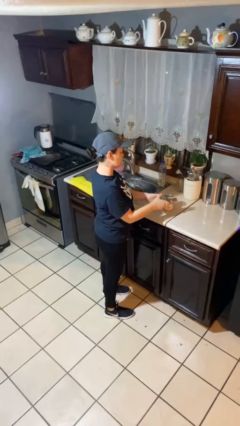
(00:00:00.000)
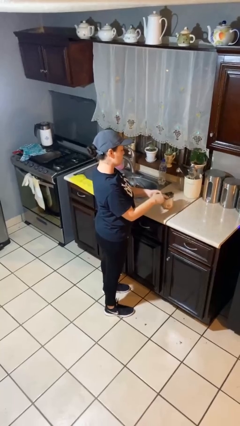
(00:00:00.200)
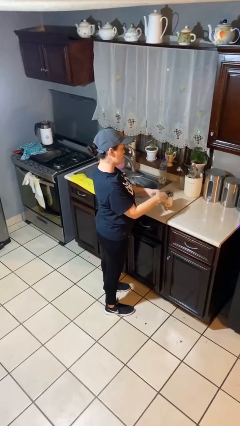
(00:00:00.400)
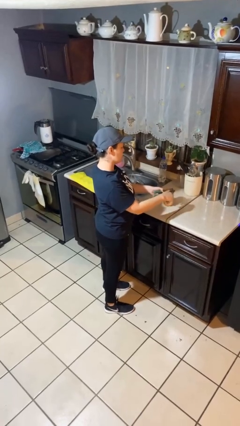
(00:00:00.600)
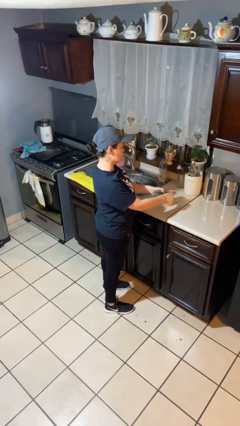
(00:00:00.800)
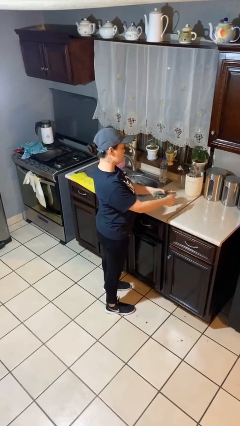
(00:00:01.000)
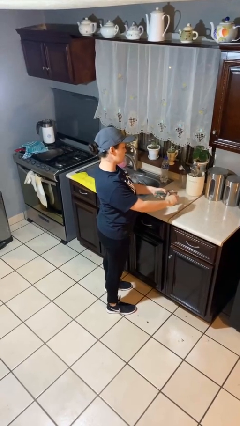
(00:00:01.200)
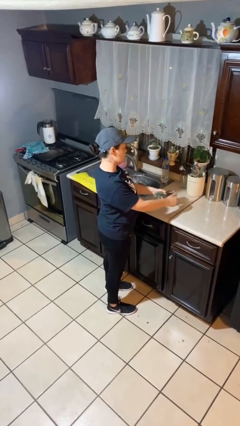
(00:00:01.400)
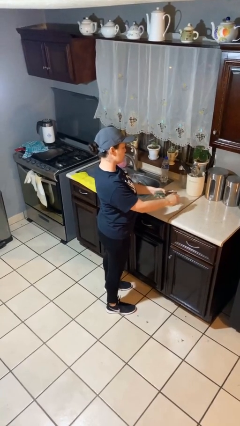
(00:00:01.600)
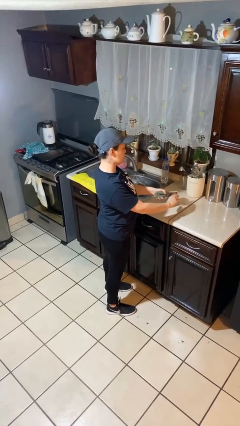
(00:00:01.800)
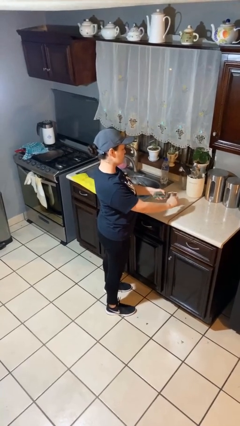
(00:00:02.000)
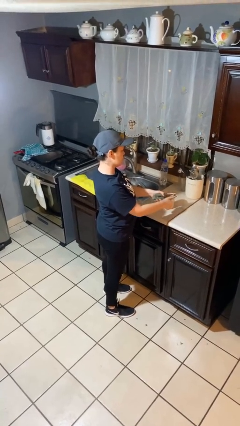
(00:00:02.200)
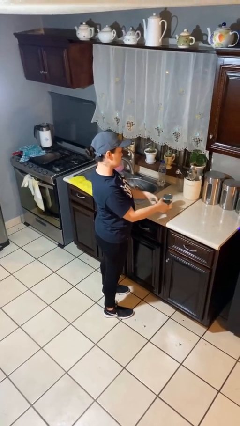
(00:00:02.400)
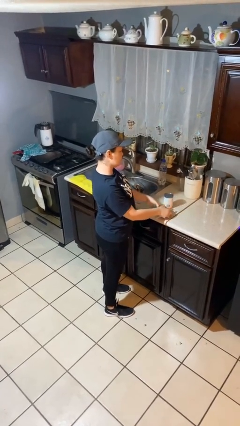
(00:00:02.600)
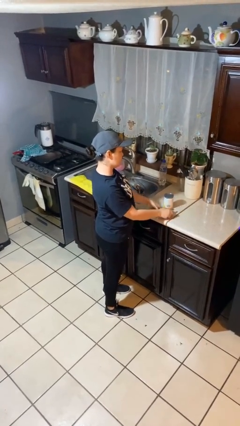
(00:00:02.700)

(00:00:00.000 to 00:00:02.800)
person opens can with can opener

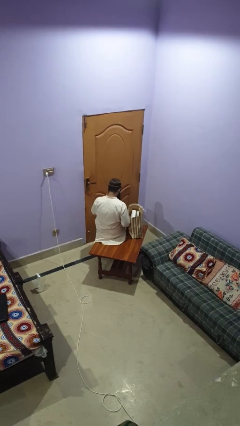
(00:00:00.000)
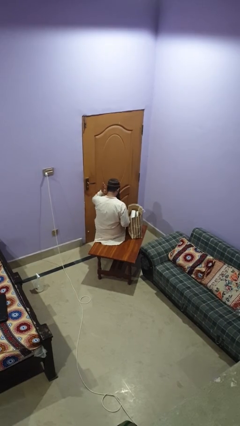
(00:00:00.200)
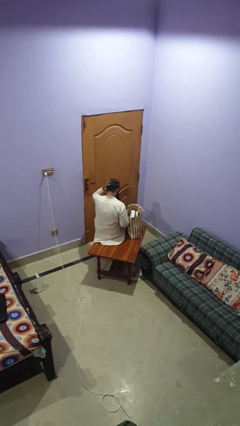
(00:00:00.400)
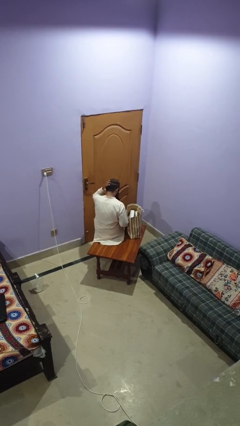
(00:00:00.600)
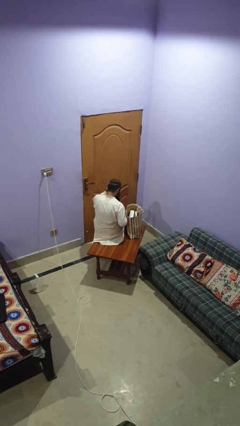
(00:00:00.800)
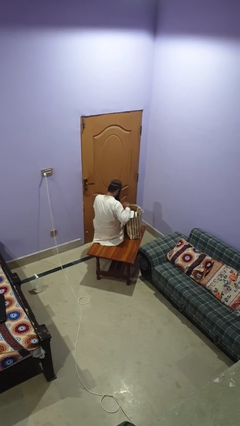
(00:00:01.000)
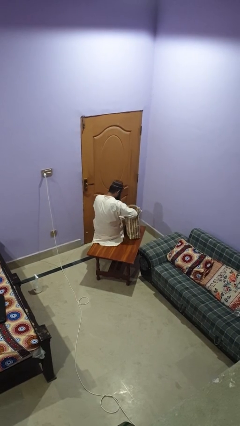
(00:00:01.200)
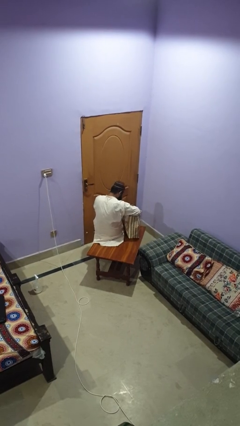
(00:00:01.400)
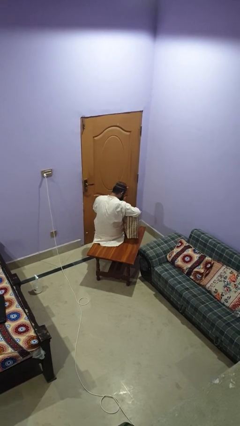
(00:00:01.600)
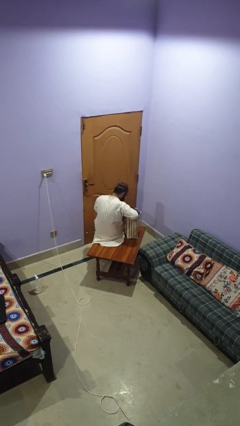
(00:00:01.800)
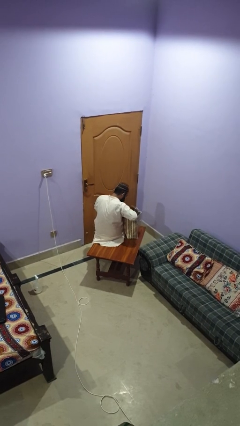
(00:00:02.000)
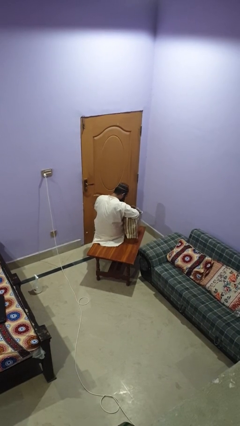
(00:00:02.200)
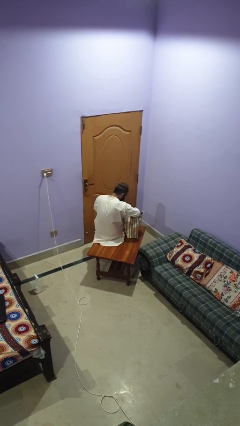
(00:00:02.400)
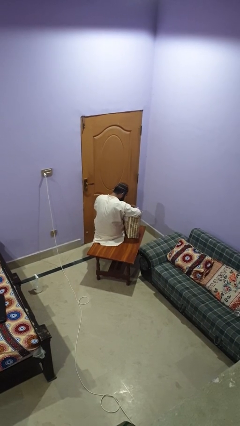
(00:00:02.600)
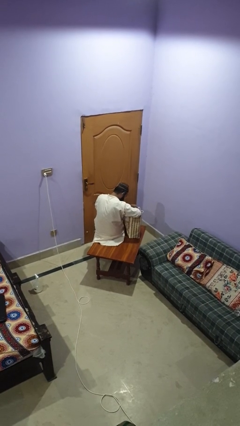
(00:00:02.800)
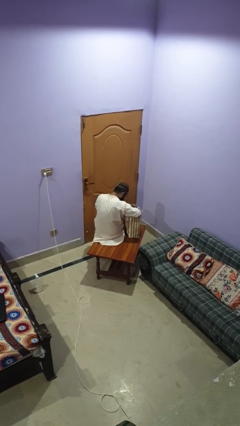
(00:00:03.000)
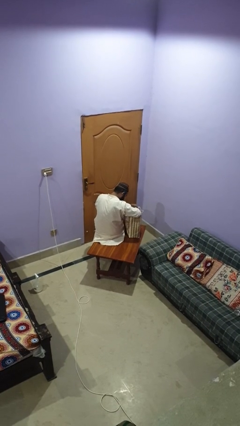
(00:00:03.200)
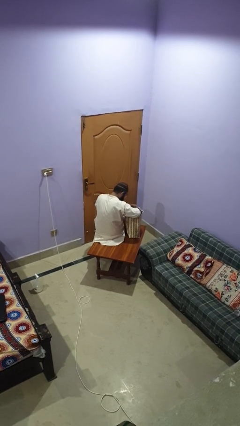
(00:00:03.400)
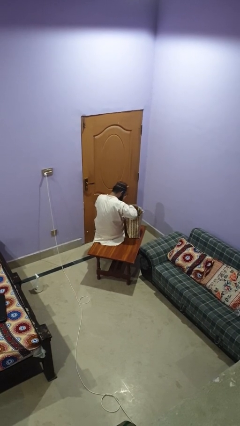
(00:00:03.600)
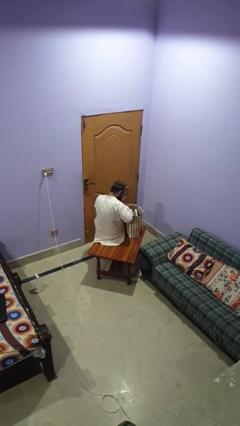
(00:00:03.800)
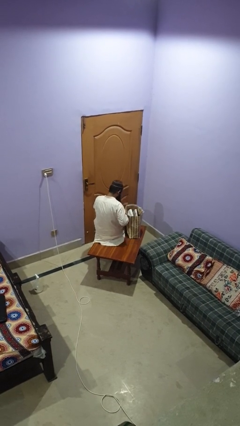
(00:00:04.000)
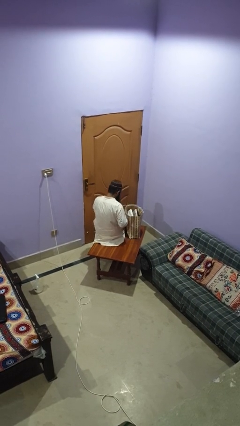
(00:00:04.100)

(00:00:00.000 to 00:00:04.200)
person searches in bag

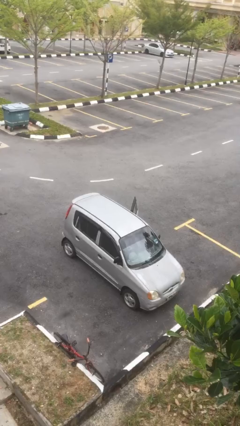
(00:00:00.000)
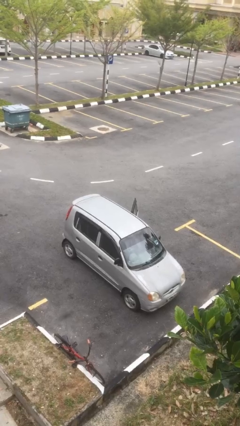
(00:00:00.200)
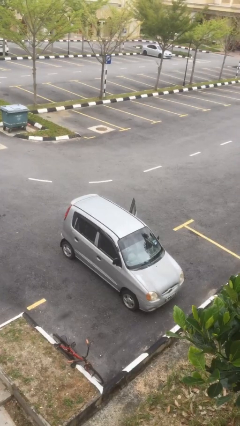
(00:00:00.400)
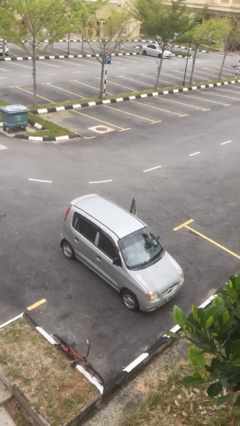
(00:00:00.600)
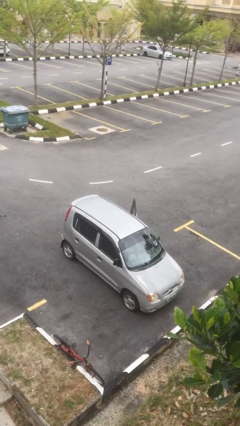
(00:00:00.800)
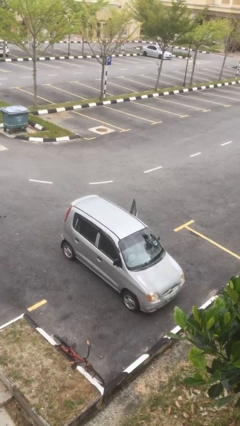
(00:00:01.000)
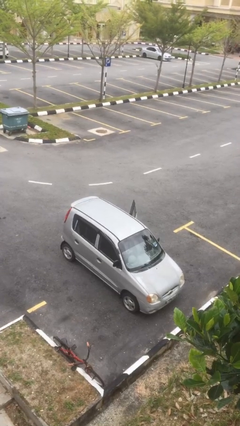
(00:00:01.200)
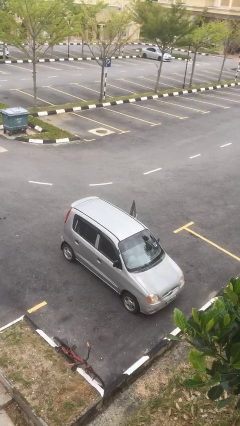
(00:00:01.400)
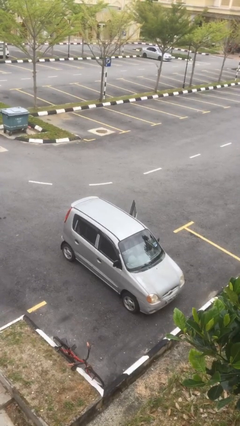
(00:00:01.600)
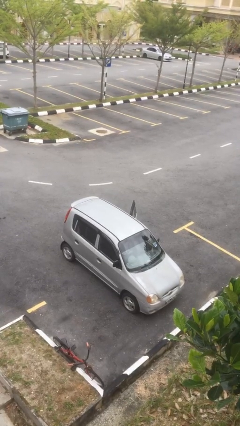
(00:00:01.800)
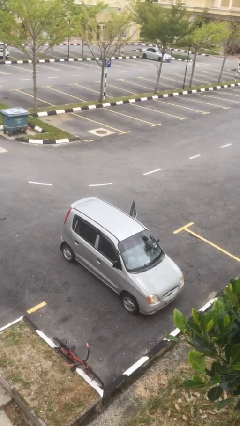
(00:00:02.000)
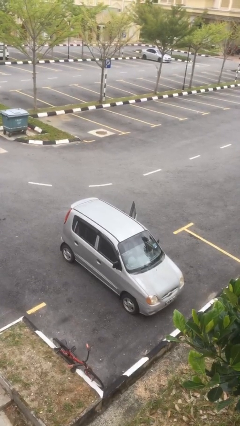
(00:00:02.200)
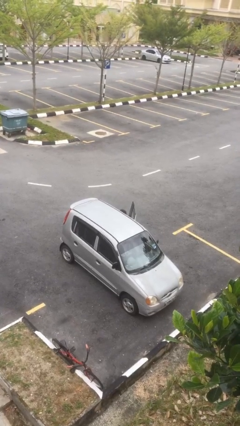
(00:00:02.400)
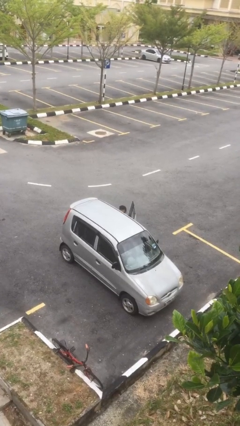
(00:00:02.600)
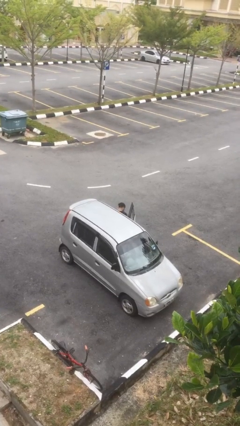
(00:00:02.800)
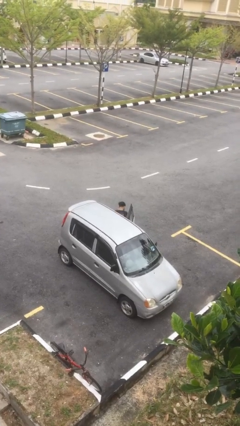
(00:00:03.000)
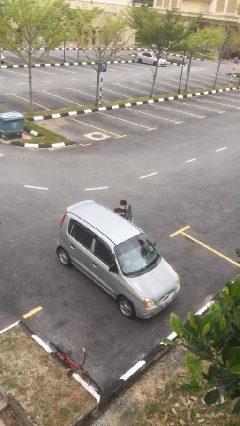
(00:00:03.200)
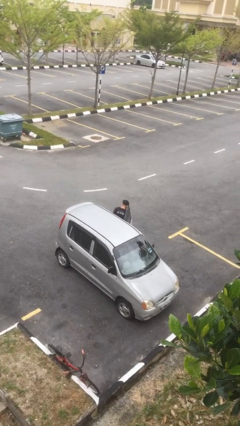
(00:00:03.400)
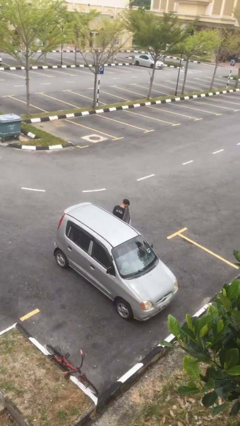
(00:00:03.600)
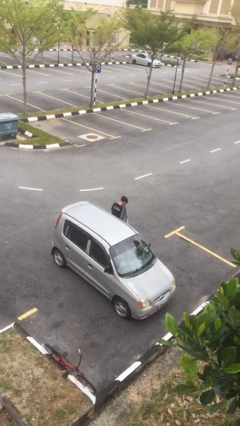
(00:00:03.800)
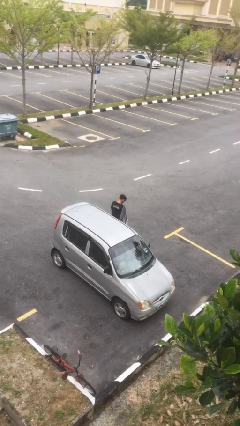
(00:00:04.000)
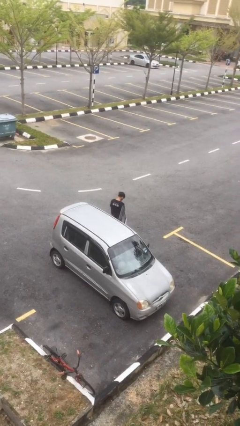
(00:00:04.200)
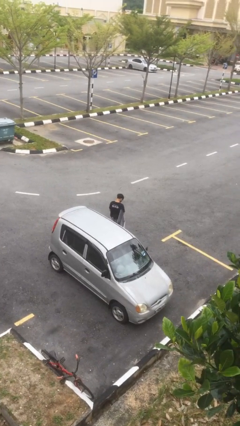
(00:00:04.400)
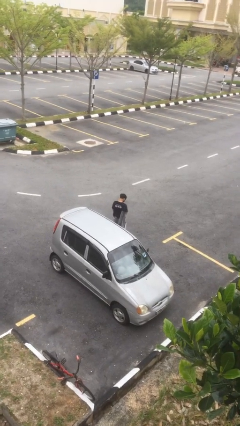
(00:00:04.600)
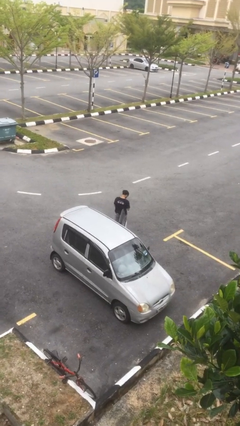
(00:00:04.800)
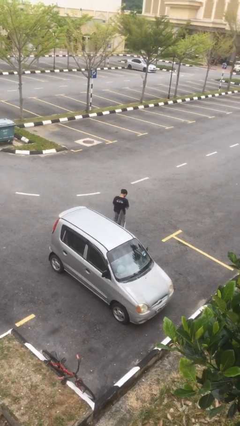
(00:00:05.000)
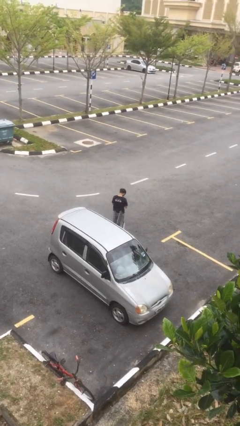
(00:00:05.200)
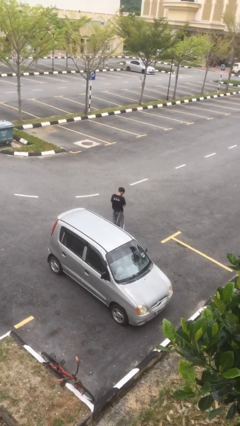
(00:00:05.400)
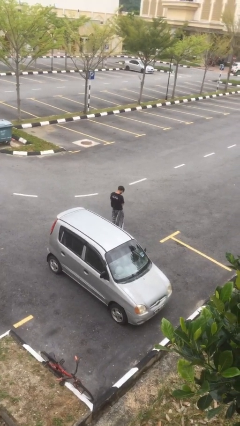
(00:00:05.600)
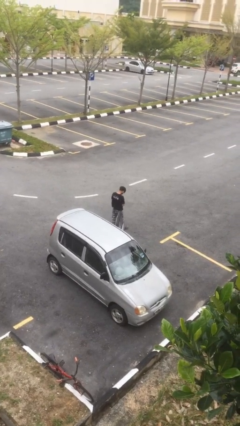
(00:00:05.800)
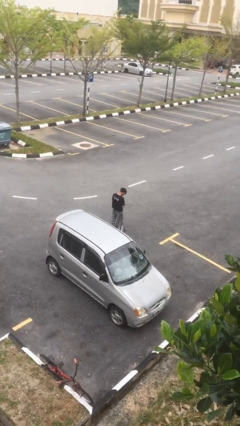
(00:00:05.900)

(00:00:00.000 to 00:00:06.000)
person exits car

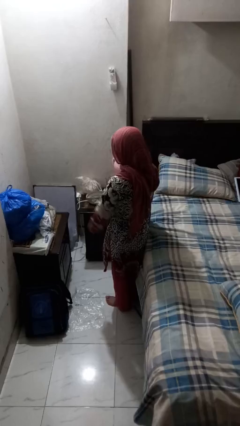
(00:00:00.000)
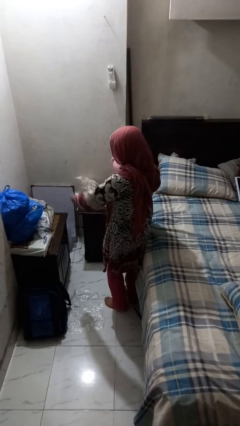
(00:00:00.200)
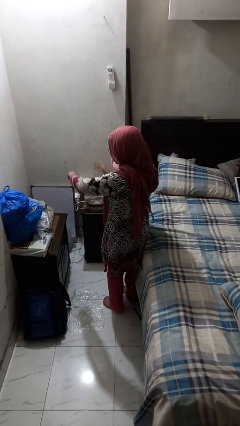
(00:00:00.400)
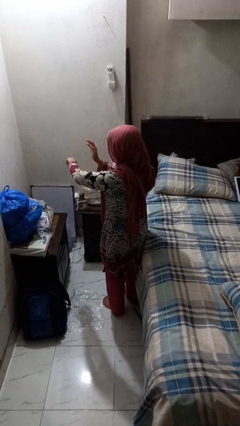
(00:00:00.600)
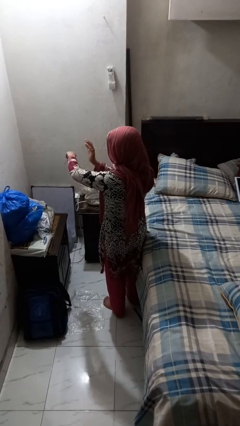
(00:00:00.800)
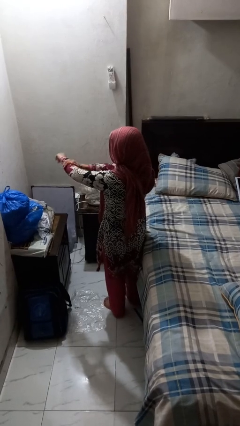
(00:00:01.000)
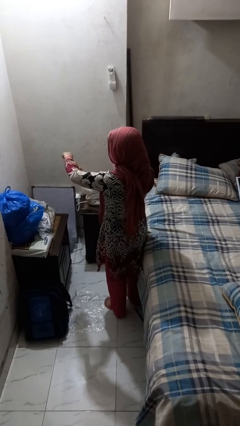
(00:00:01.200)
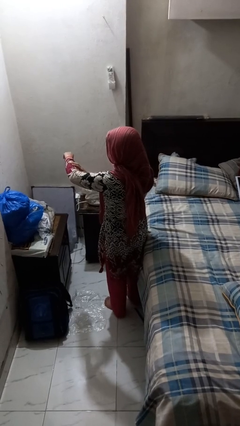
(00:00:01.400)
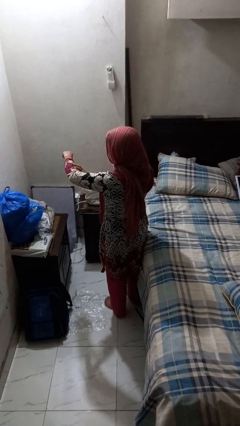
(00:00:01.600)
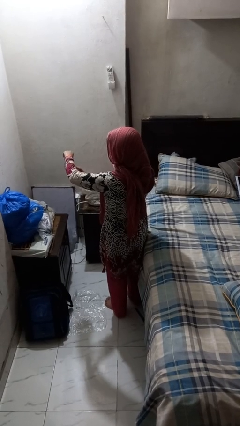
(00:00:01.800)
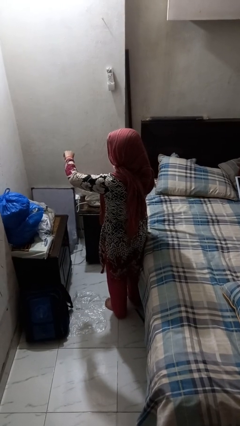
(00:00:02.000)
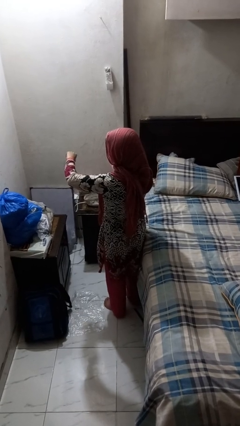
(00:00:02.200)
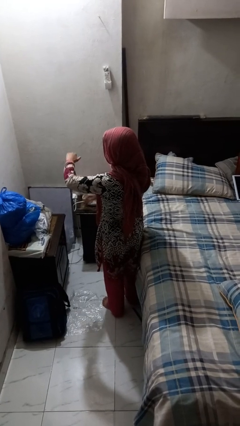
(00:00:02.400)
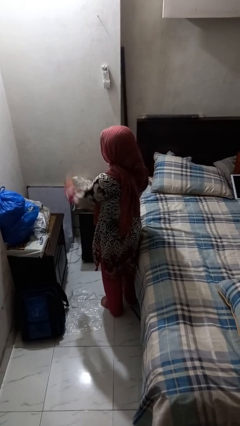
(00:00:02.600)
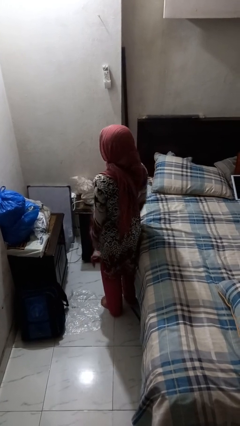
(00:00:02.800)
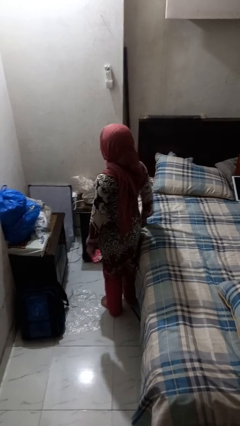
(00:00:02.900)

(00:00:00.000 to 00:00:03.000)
person swats bug

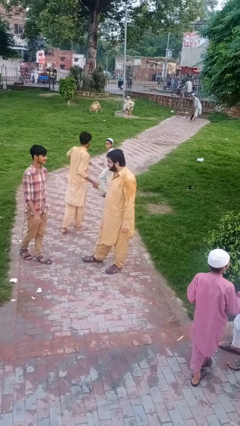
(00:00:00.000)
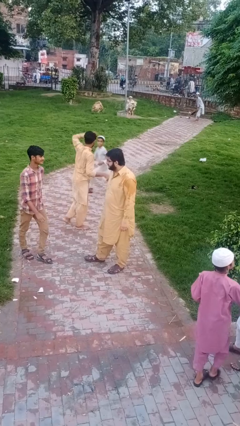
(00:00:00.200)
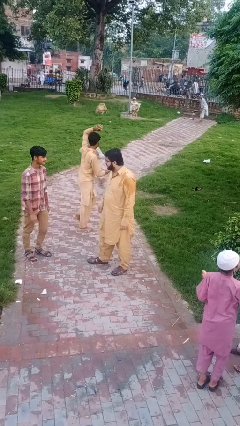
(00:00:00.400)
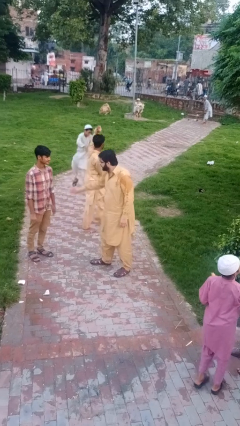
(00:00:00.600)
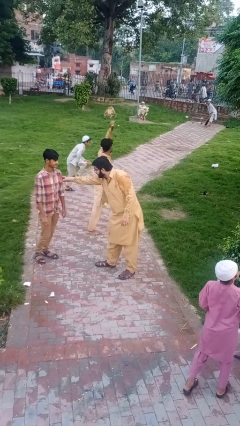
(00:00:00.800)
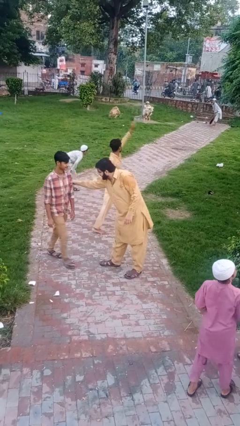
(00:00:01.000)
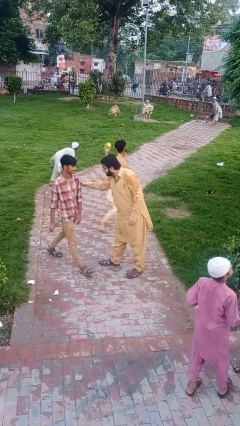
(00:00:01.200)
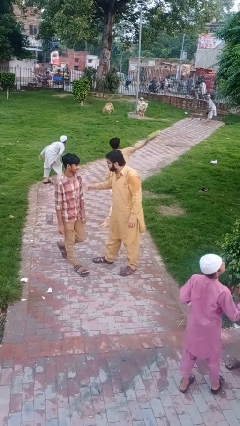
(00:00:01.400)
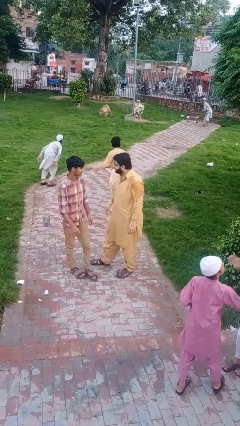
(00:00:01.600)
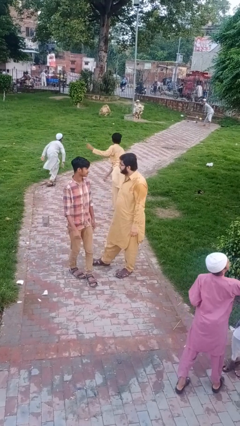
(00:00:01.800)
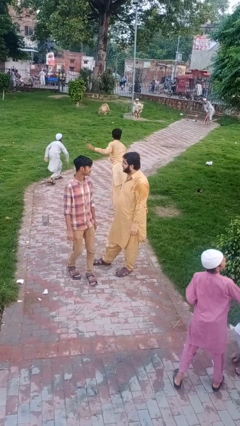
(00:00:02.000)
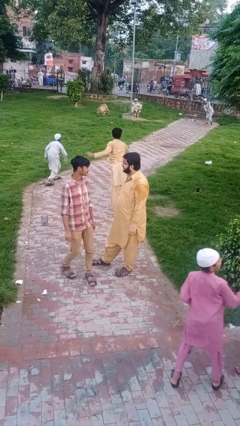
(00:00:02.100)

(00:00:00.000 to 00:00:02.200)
person grabs person by bicep
